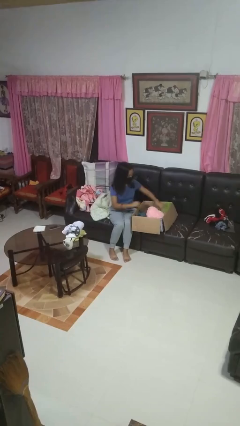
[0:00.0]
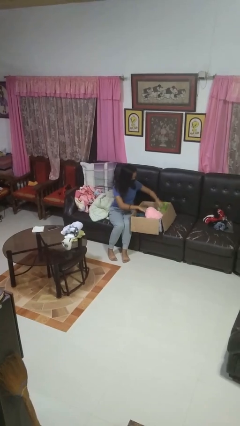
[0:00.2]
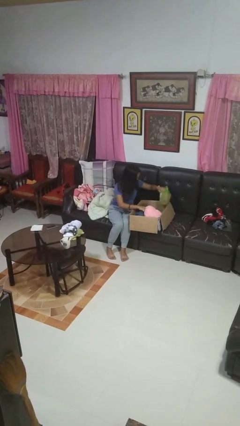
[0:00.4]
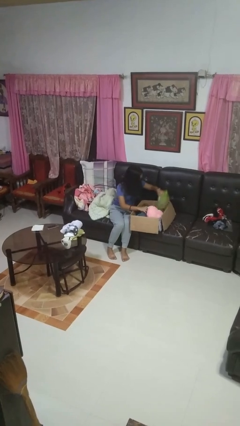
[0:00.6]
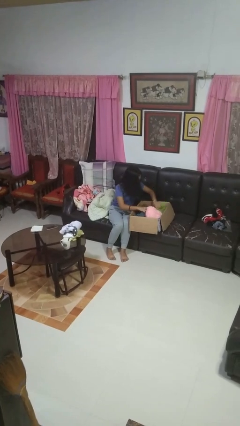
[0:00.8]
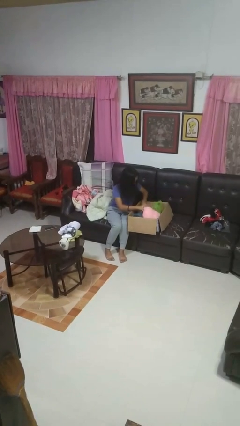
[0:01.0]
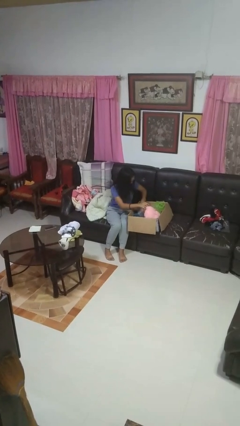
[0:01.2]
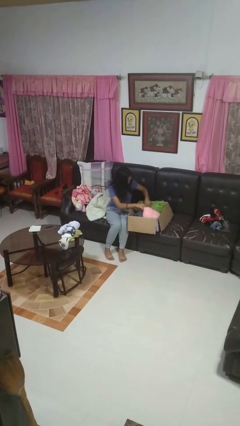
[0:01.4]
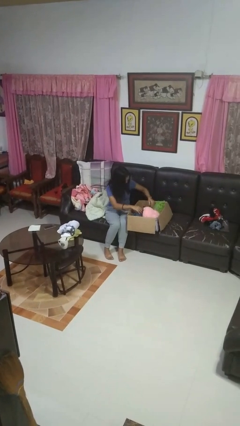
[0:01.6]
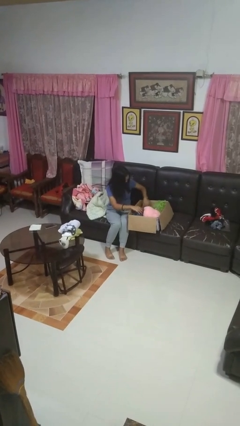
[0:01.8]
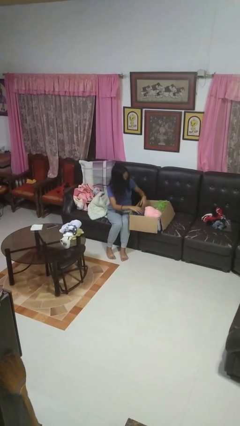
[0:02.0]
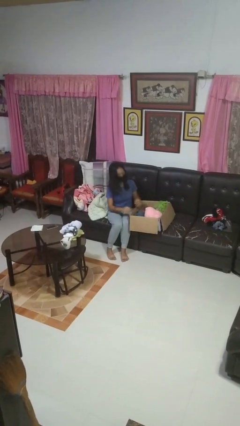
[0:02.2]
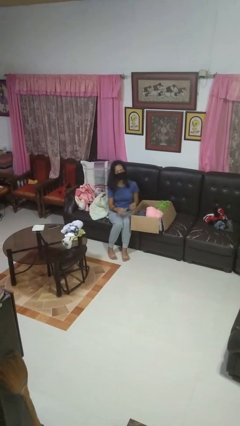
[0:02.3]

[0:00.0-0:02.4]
person searches in box

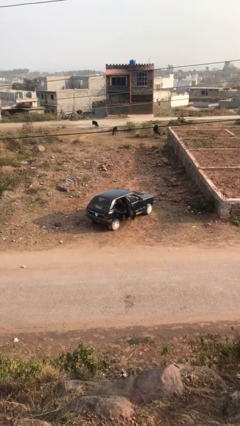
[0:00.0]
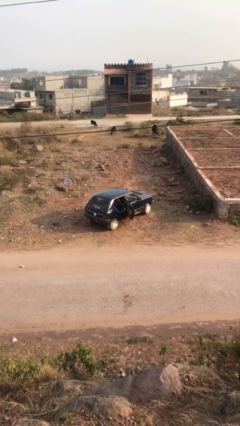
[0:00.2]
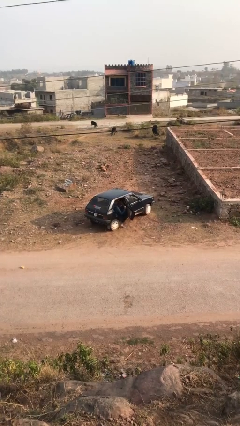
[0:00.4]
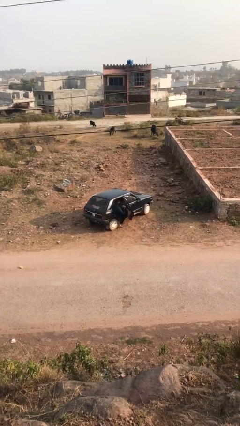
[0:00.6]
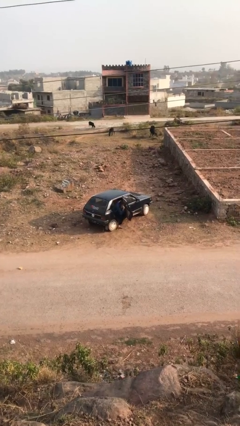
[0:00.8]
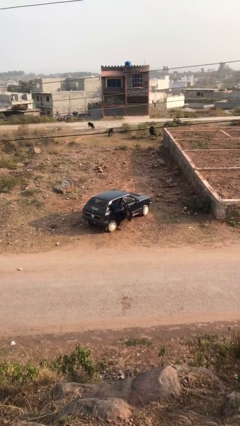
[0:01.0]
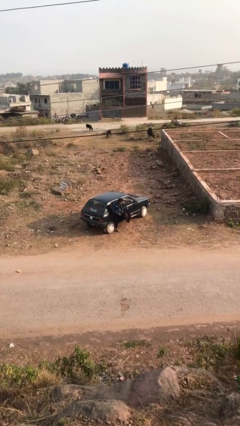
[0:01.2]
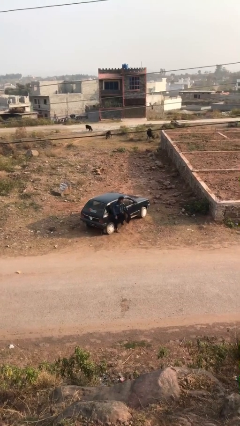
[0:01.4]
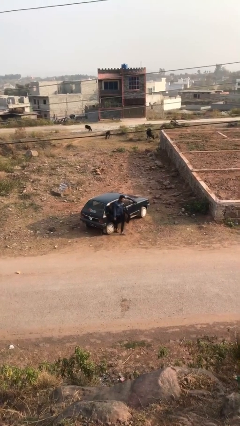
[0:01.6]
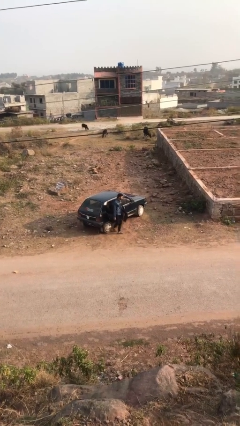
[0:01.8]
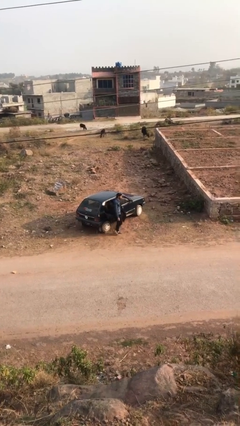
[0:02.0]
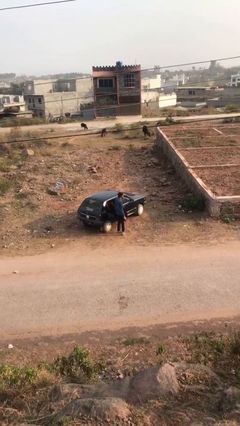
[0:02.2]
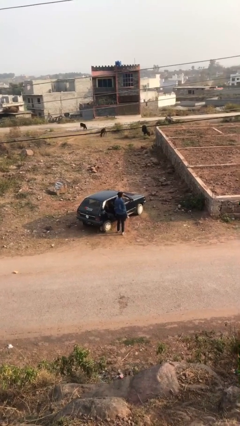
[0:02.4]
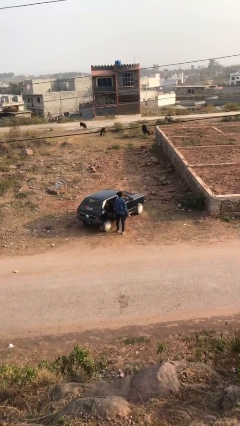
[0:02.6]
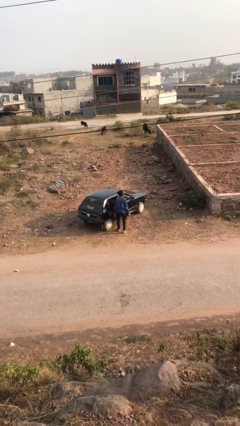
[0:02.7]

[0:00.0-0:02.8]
person exits car

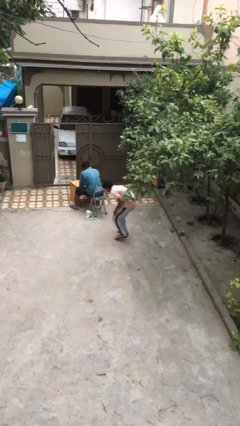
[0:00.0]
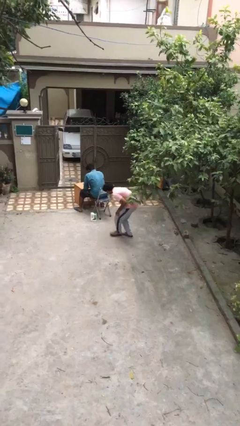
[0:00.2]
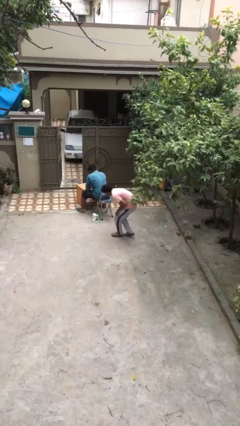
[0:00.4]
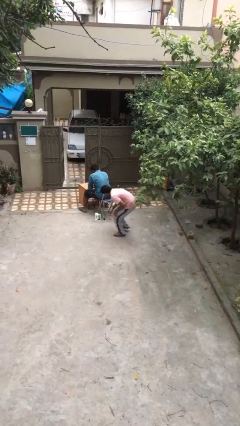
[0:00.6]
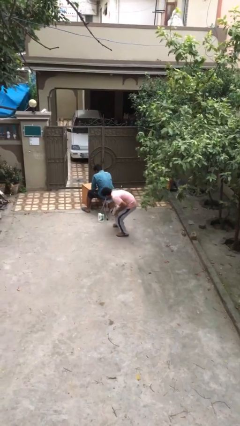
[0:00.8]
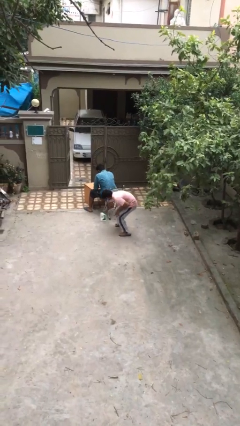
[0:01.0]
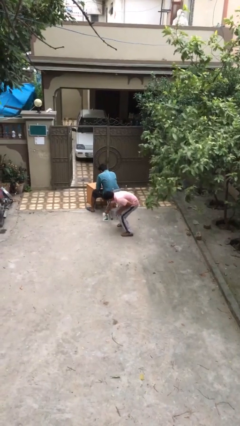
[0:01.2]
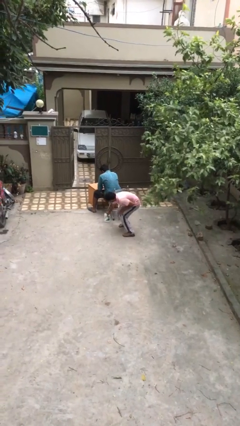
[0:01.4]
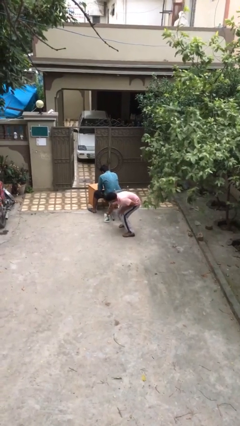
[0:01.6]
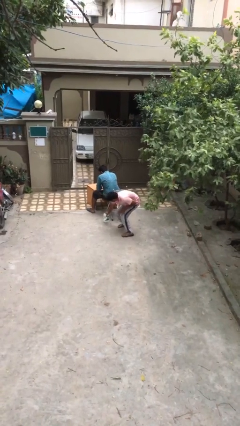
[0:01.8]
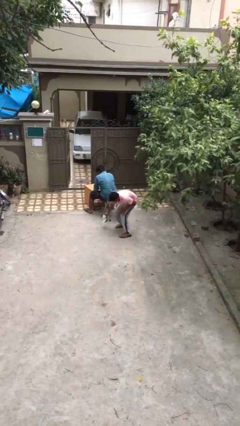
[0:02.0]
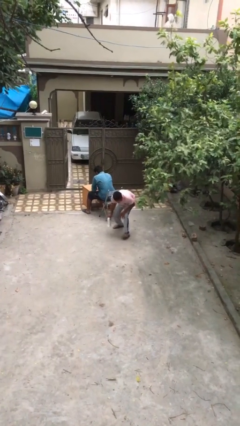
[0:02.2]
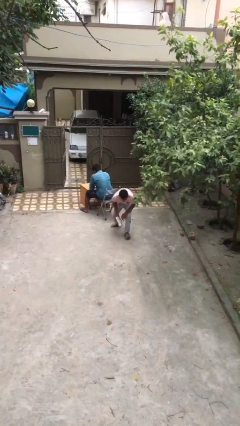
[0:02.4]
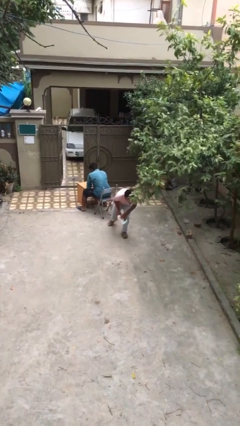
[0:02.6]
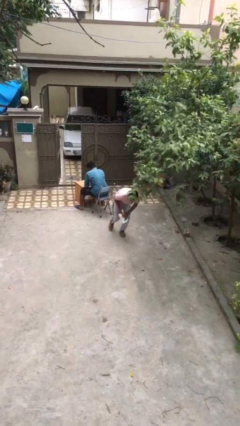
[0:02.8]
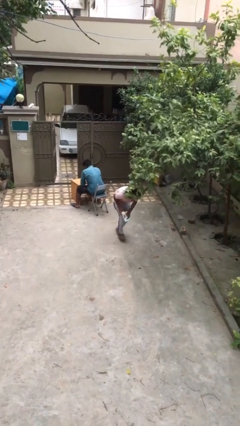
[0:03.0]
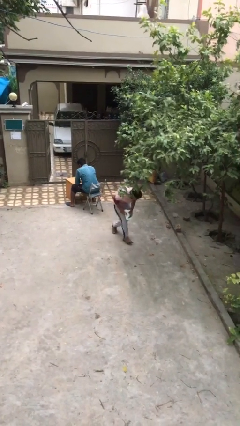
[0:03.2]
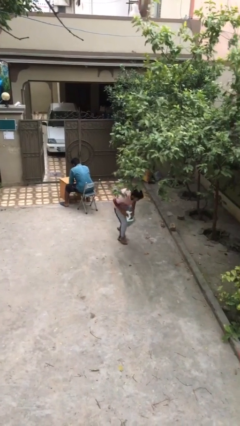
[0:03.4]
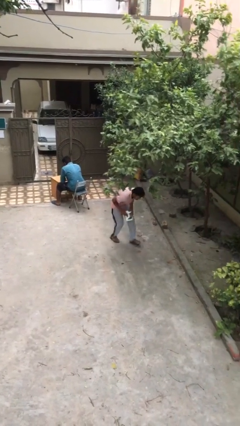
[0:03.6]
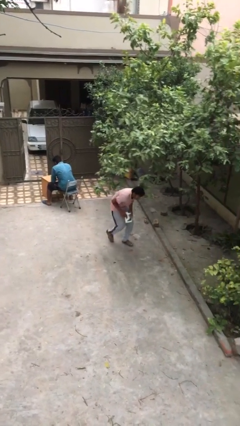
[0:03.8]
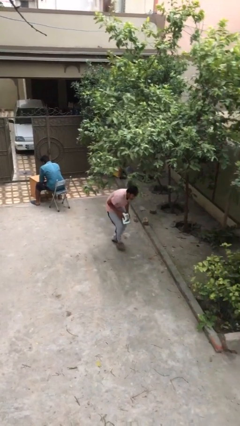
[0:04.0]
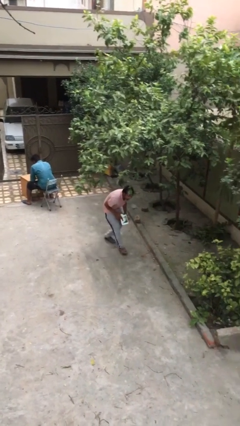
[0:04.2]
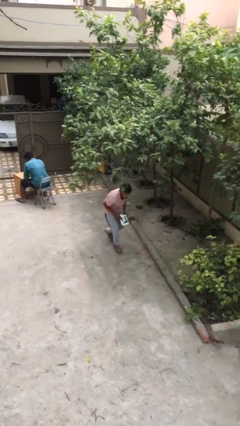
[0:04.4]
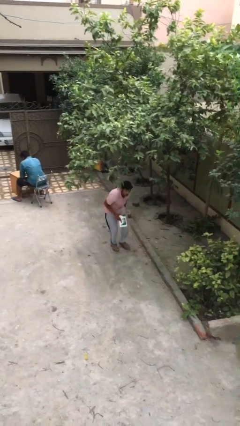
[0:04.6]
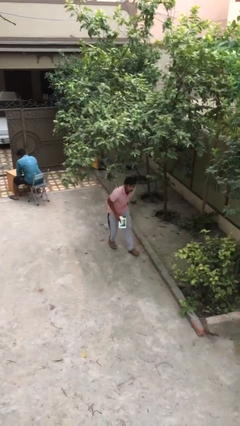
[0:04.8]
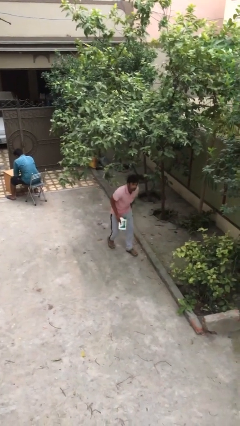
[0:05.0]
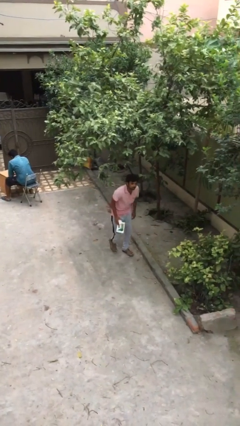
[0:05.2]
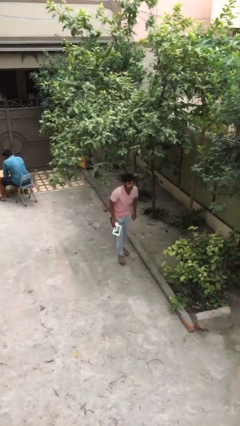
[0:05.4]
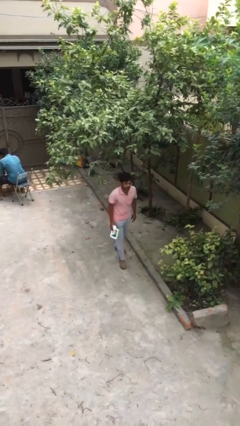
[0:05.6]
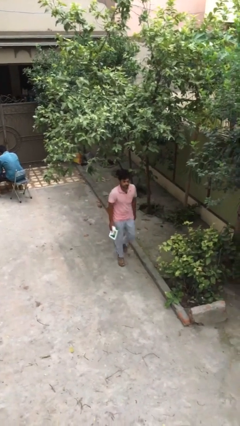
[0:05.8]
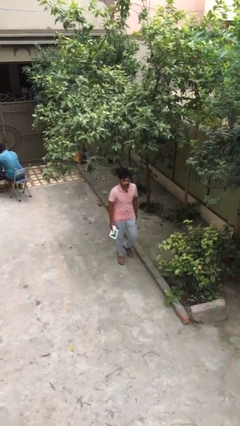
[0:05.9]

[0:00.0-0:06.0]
person steals object from person

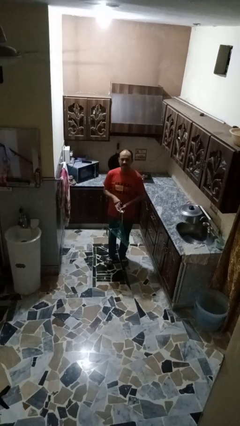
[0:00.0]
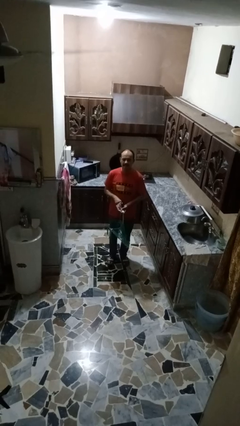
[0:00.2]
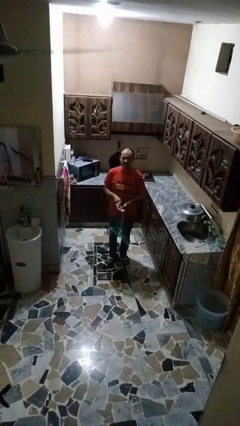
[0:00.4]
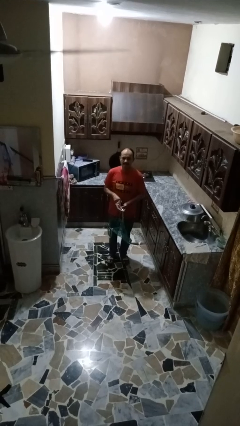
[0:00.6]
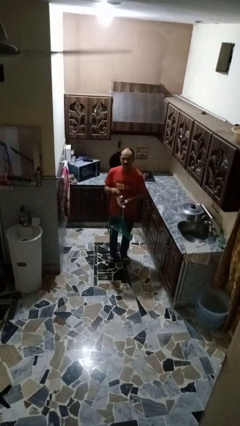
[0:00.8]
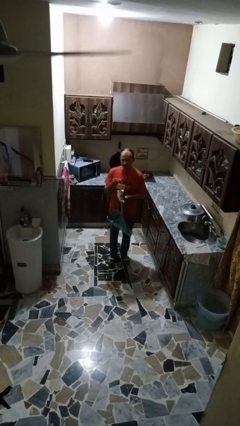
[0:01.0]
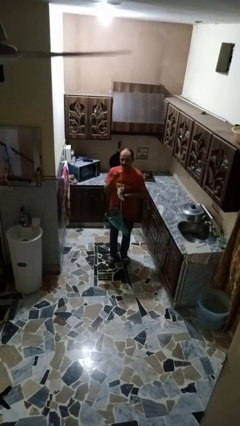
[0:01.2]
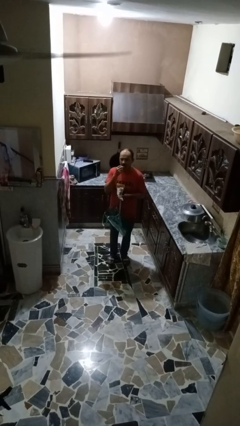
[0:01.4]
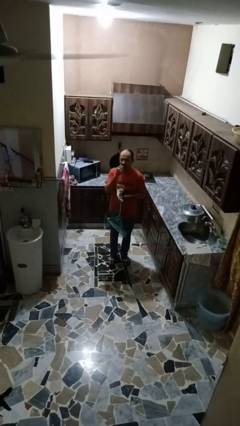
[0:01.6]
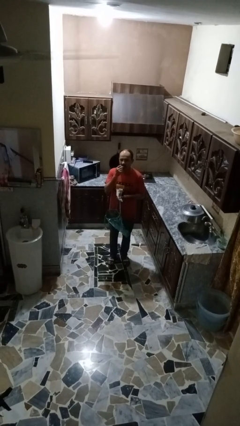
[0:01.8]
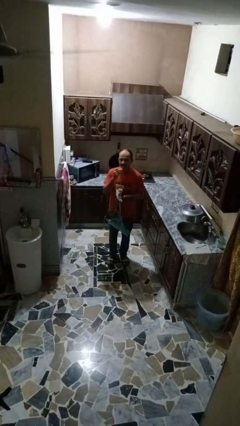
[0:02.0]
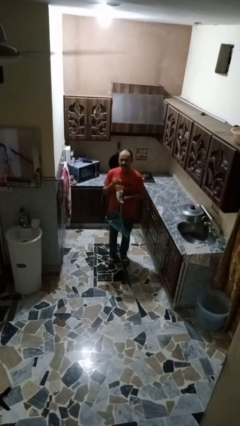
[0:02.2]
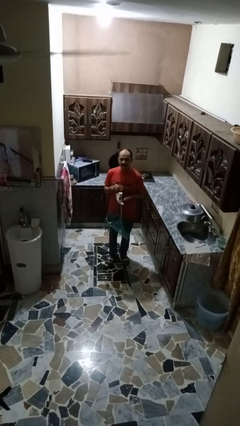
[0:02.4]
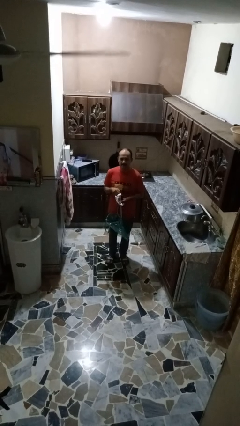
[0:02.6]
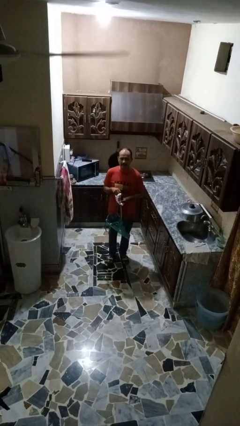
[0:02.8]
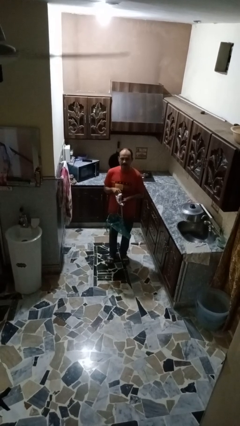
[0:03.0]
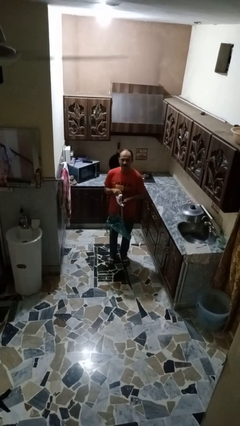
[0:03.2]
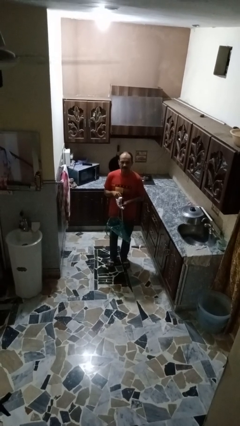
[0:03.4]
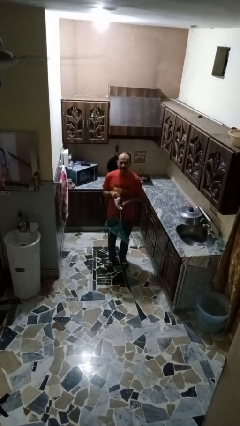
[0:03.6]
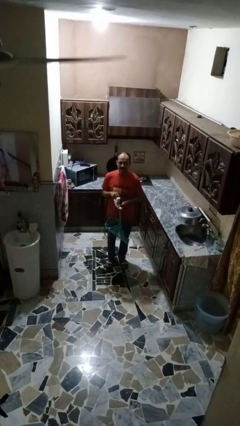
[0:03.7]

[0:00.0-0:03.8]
person eats snack from bag

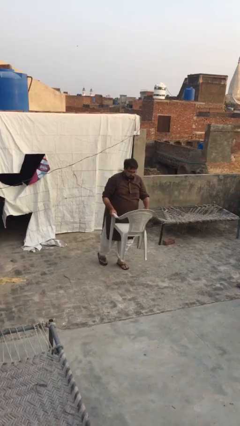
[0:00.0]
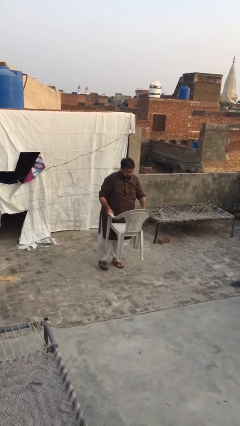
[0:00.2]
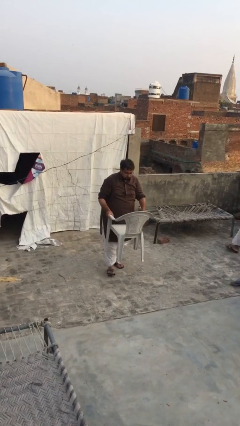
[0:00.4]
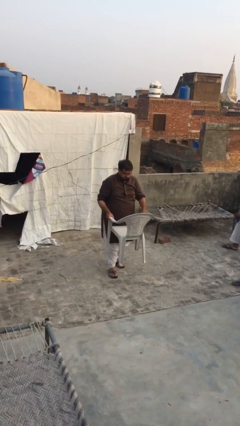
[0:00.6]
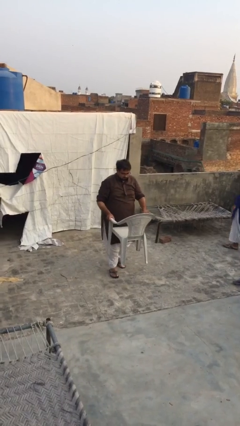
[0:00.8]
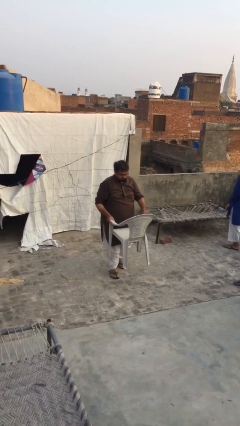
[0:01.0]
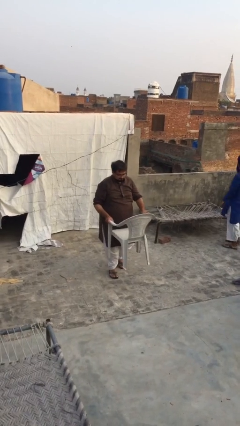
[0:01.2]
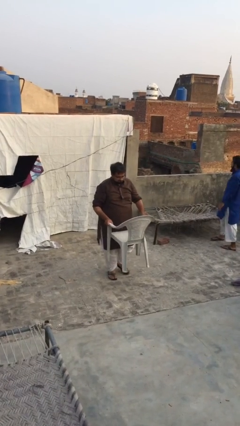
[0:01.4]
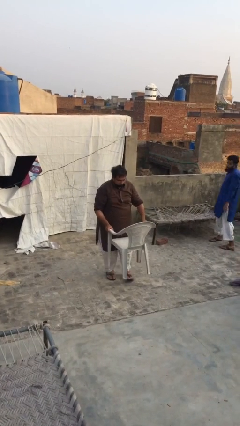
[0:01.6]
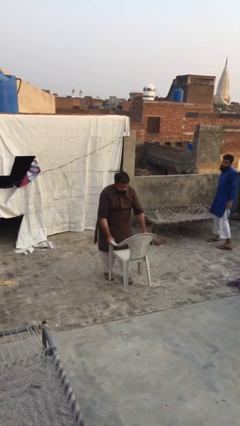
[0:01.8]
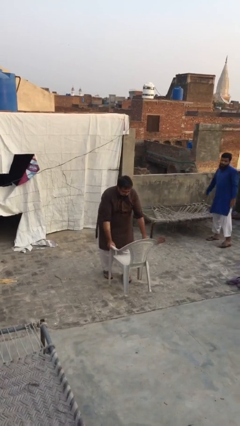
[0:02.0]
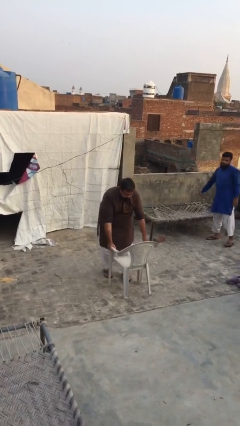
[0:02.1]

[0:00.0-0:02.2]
person puts down object on floor

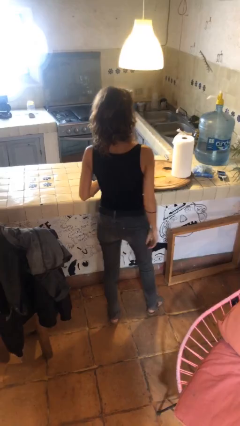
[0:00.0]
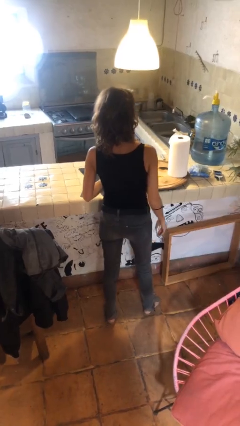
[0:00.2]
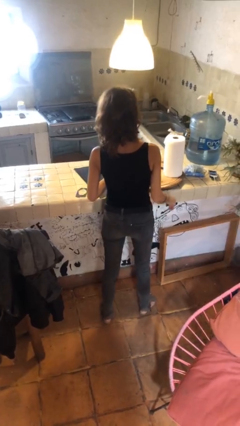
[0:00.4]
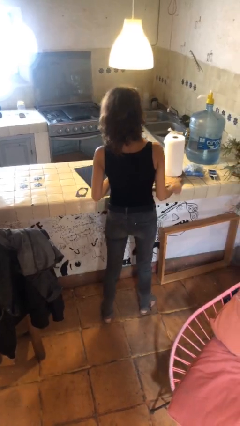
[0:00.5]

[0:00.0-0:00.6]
person puts down object on countertop
